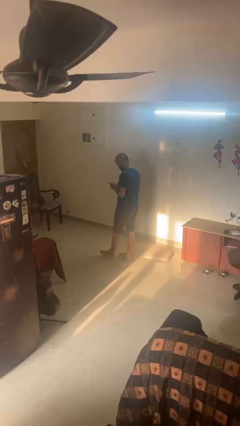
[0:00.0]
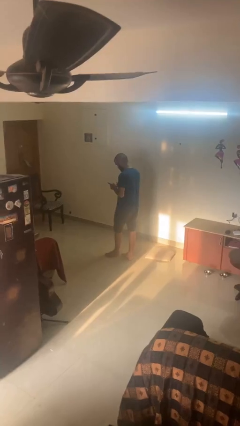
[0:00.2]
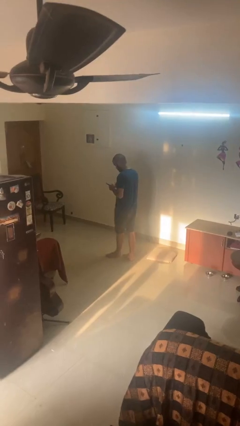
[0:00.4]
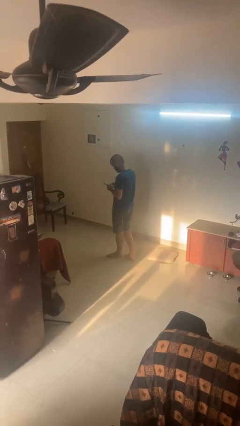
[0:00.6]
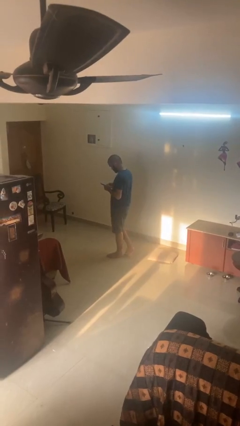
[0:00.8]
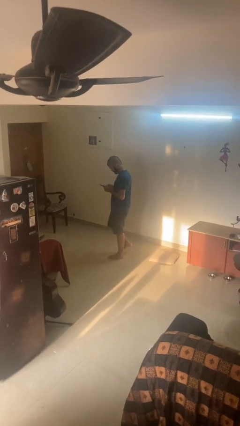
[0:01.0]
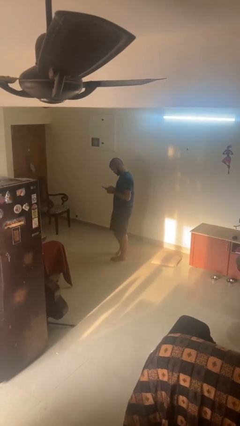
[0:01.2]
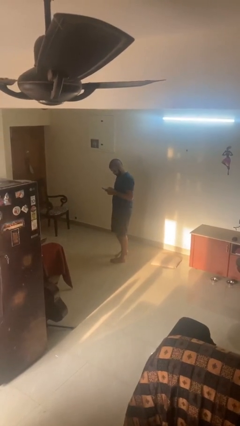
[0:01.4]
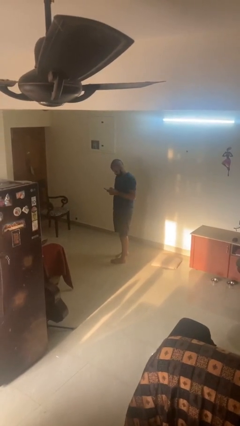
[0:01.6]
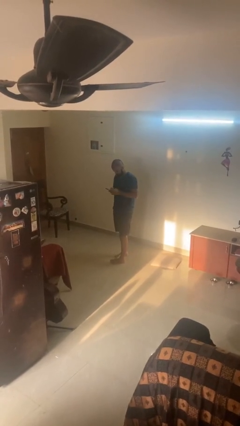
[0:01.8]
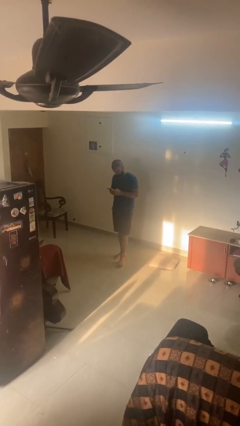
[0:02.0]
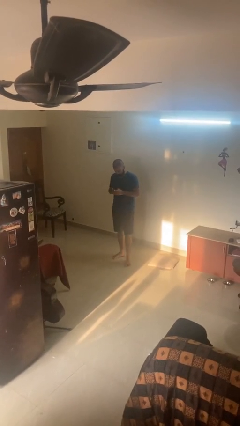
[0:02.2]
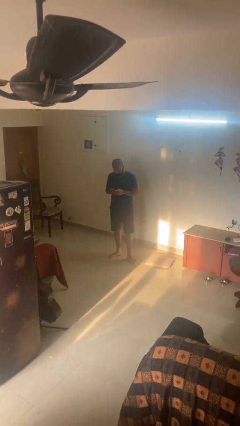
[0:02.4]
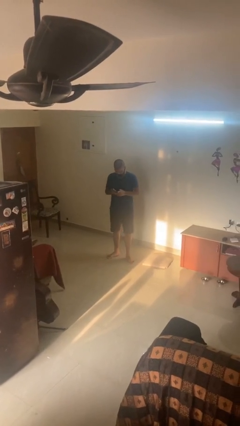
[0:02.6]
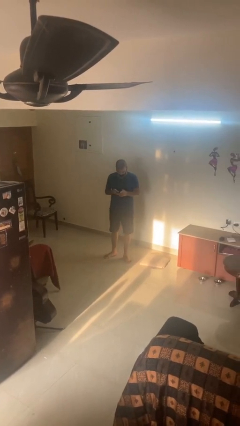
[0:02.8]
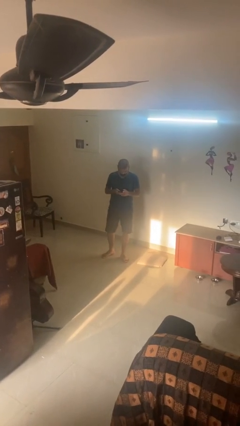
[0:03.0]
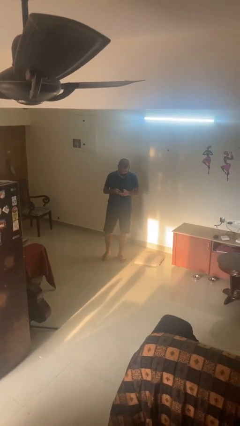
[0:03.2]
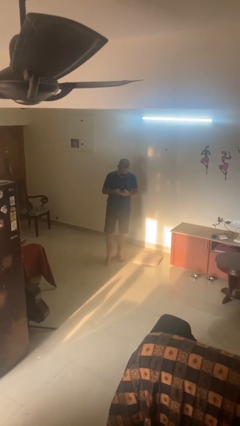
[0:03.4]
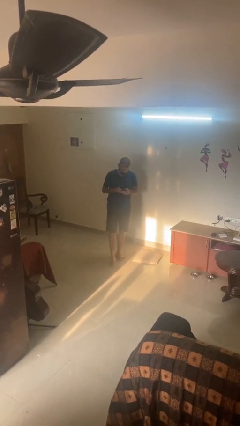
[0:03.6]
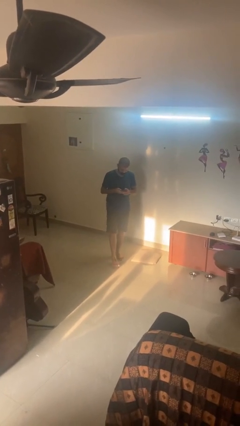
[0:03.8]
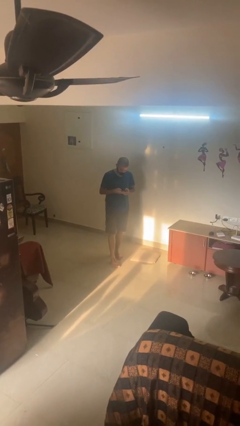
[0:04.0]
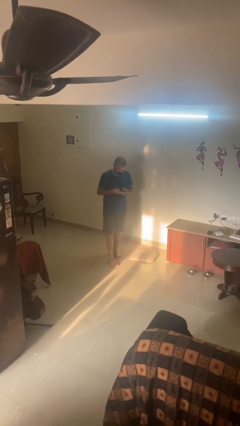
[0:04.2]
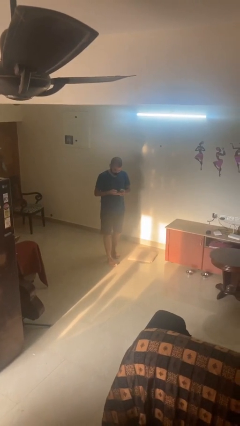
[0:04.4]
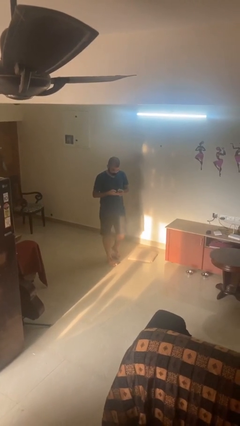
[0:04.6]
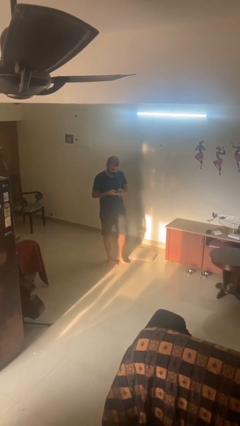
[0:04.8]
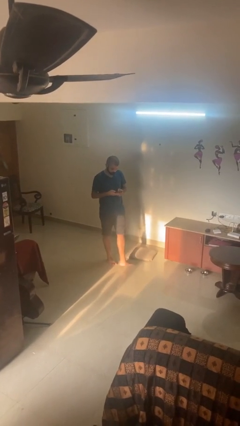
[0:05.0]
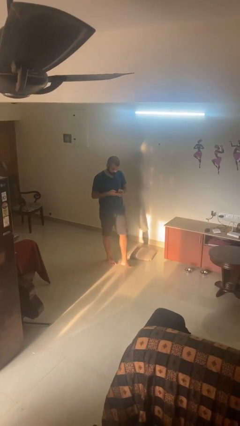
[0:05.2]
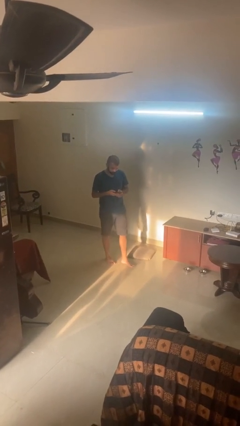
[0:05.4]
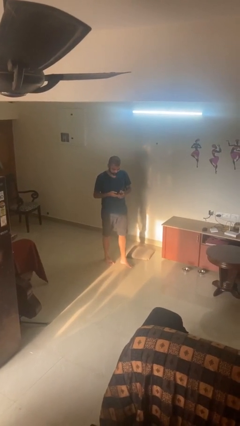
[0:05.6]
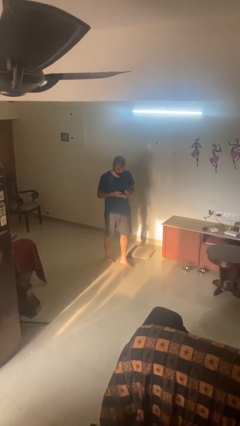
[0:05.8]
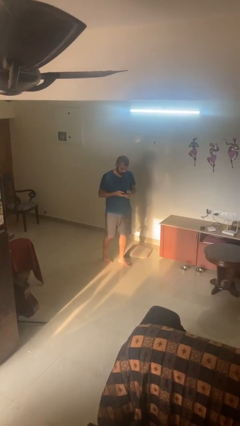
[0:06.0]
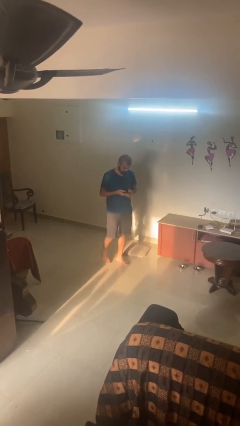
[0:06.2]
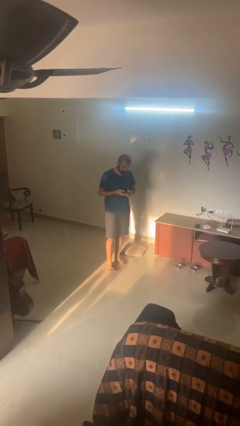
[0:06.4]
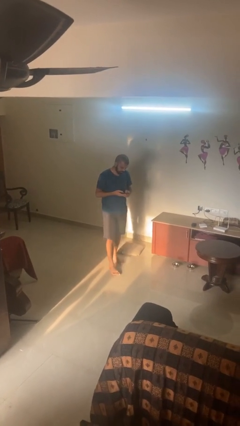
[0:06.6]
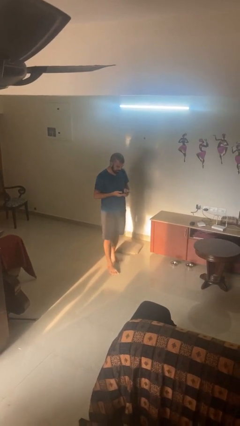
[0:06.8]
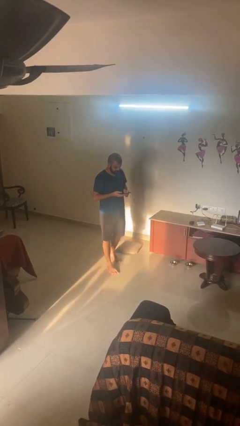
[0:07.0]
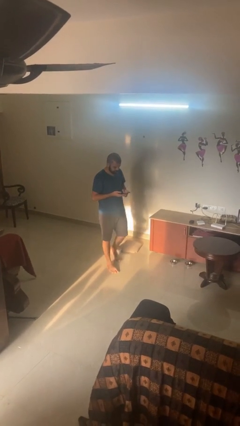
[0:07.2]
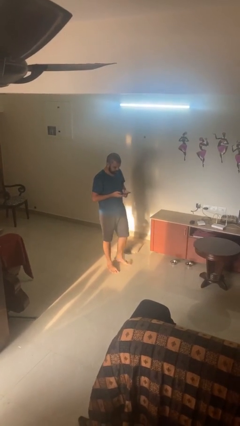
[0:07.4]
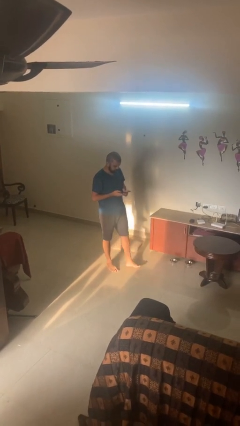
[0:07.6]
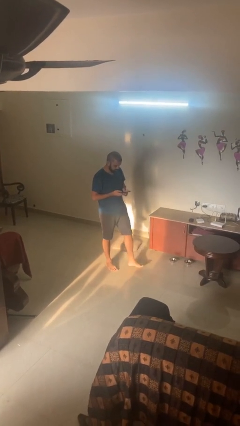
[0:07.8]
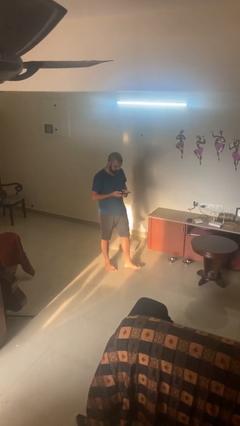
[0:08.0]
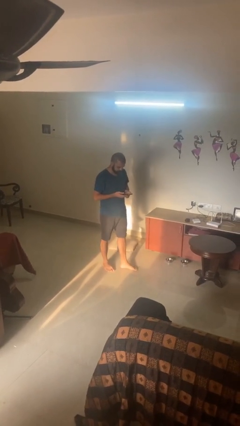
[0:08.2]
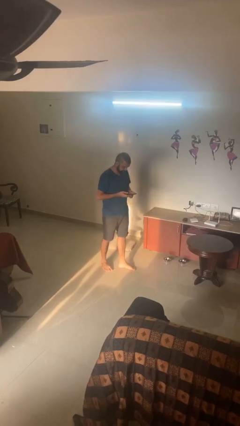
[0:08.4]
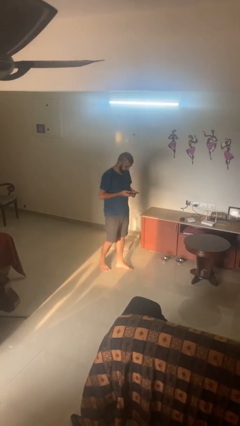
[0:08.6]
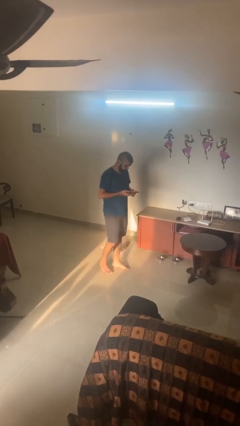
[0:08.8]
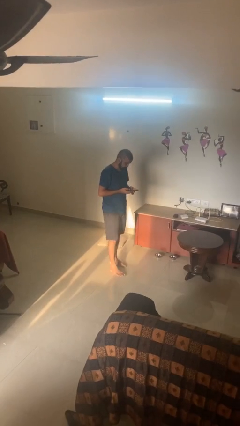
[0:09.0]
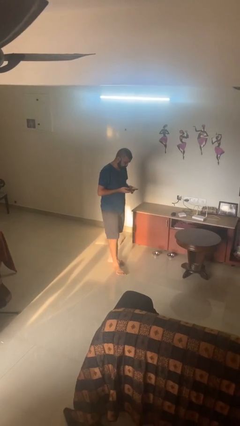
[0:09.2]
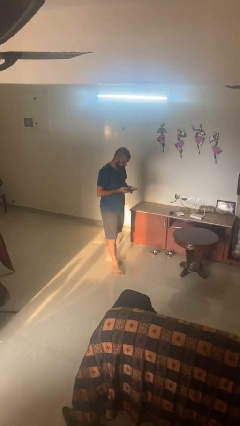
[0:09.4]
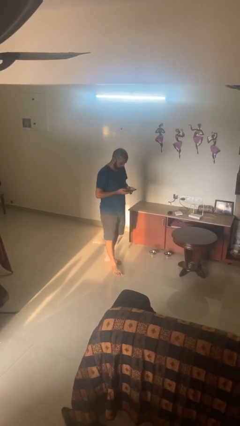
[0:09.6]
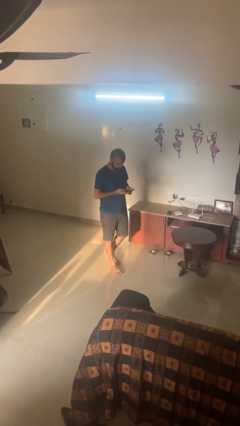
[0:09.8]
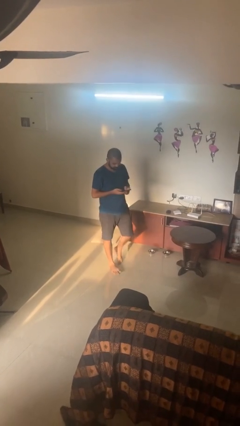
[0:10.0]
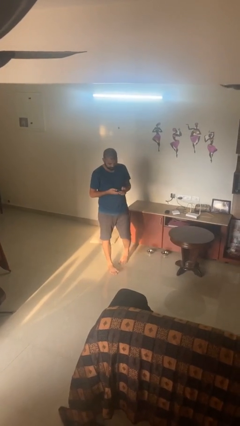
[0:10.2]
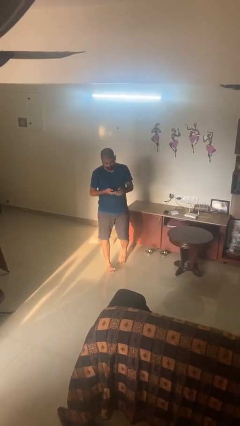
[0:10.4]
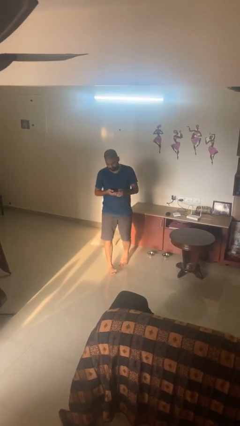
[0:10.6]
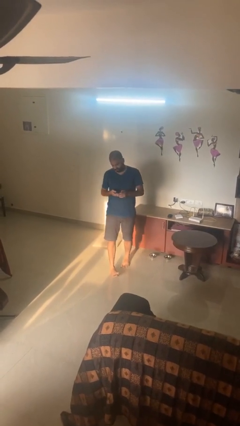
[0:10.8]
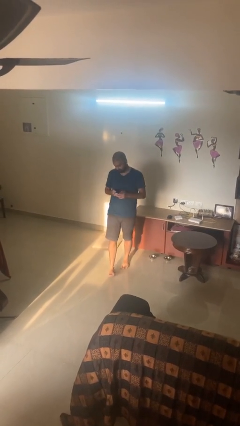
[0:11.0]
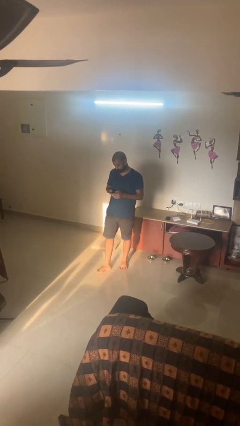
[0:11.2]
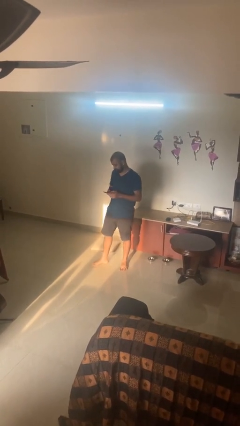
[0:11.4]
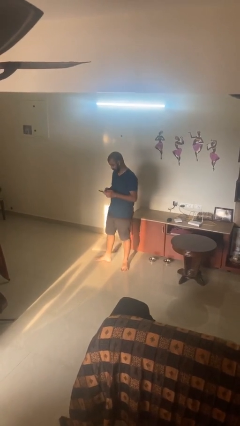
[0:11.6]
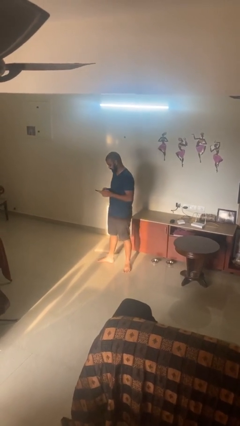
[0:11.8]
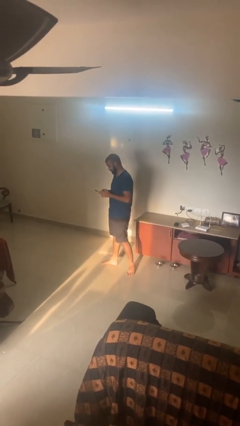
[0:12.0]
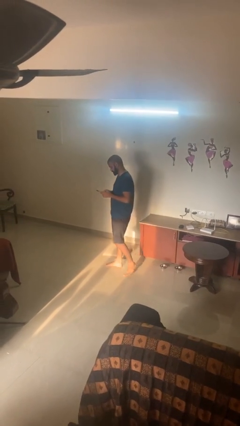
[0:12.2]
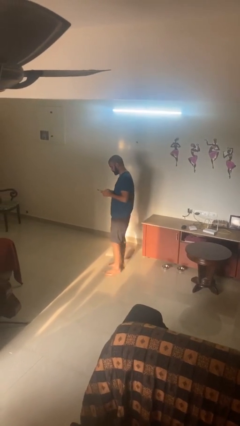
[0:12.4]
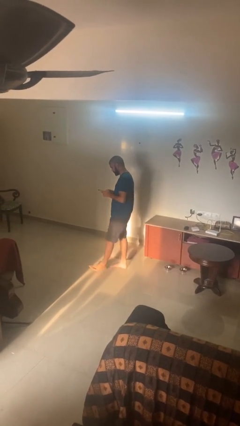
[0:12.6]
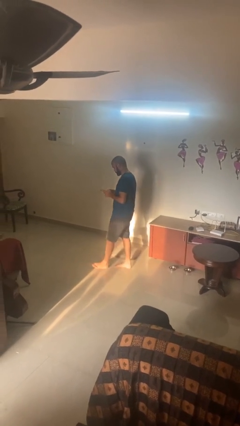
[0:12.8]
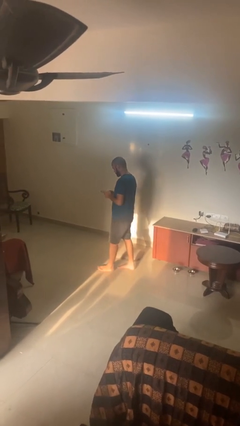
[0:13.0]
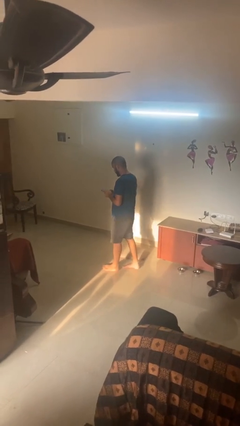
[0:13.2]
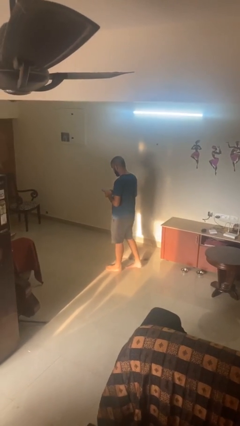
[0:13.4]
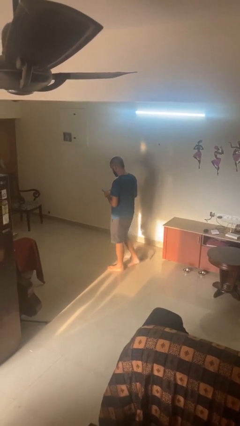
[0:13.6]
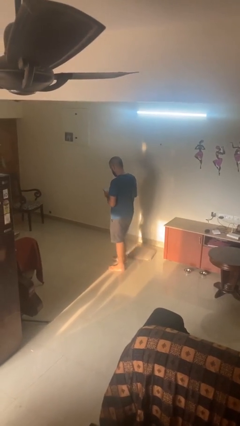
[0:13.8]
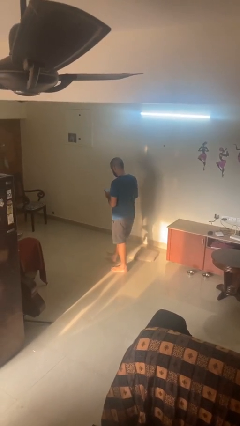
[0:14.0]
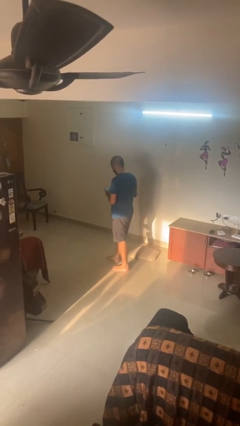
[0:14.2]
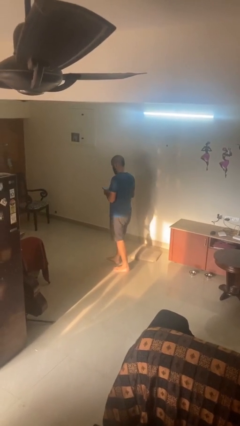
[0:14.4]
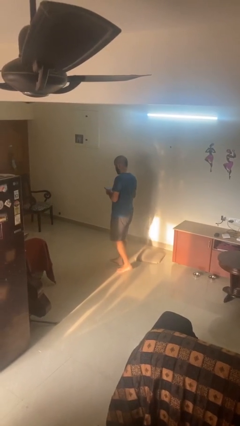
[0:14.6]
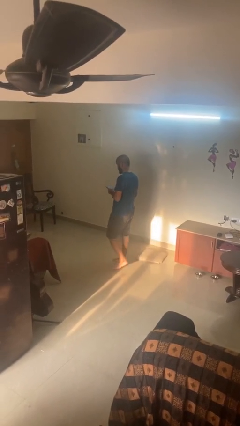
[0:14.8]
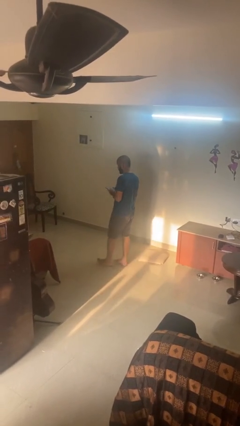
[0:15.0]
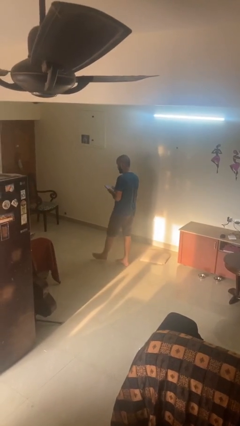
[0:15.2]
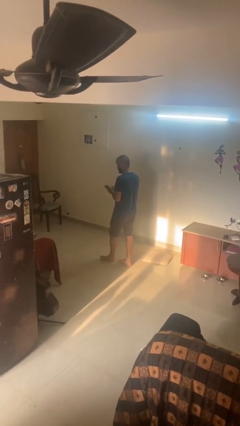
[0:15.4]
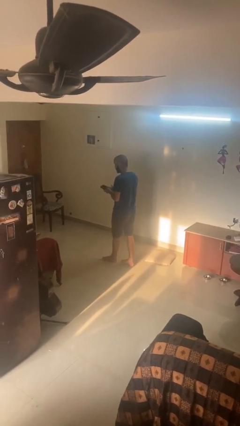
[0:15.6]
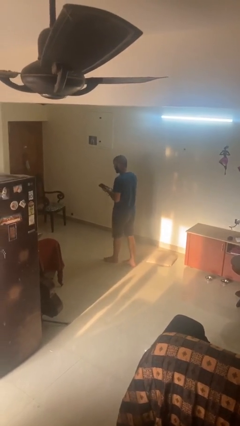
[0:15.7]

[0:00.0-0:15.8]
person texts on phone

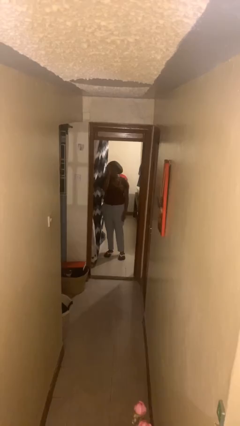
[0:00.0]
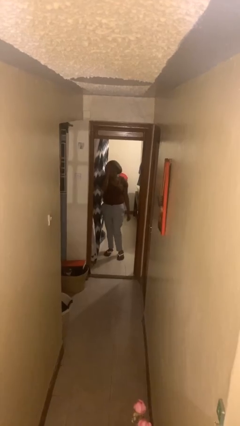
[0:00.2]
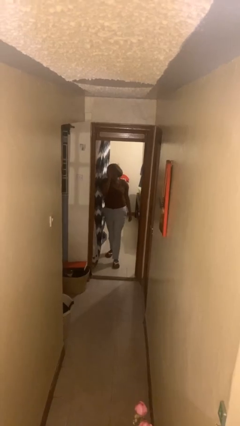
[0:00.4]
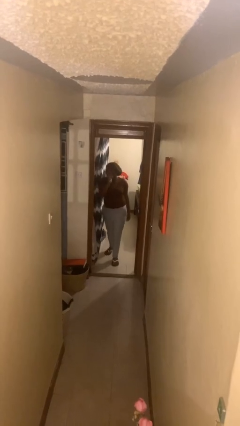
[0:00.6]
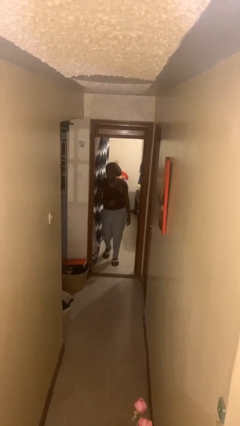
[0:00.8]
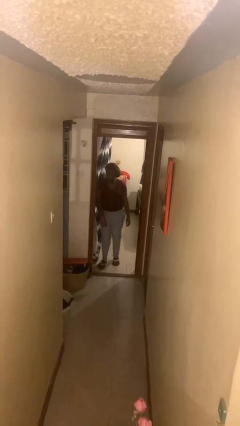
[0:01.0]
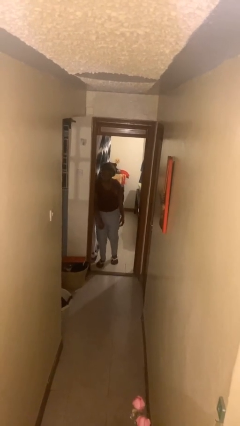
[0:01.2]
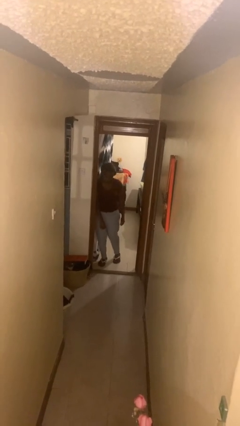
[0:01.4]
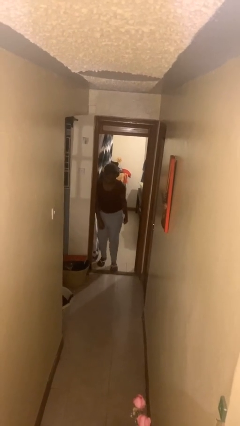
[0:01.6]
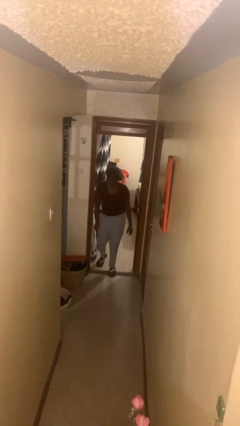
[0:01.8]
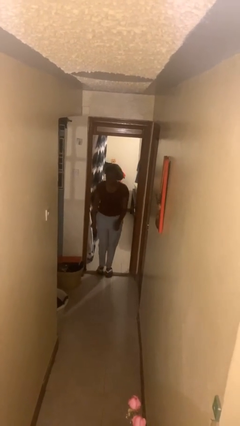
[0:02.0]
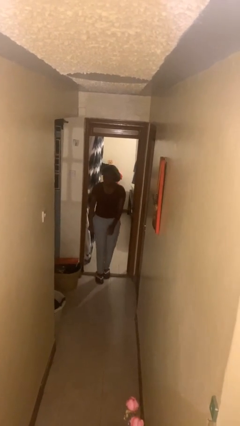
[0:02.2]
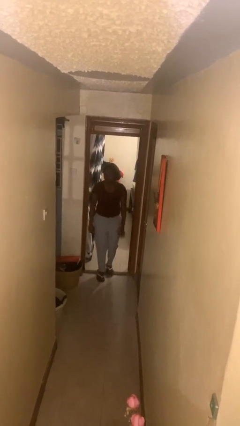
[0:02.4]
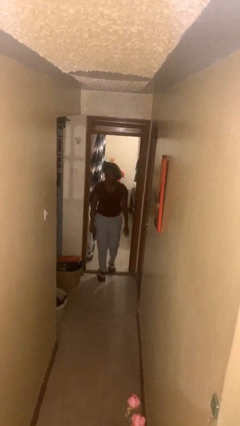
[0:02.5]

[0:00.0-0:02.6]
person bumps into wall
